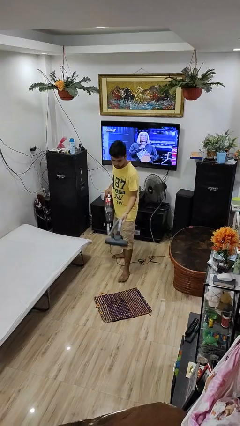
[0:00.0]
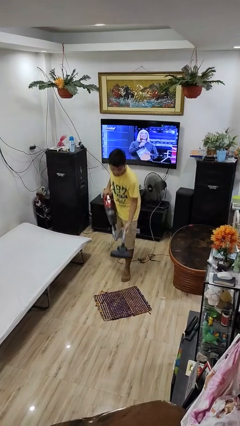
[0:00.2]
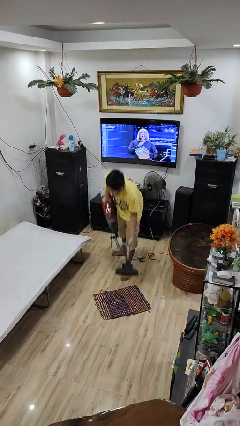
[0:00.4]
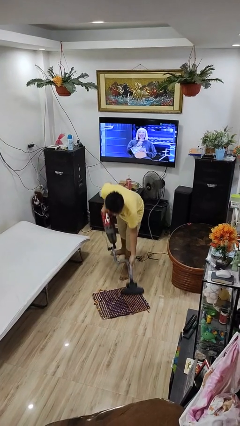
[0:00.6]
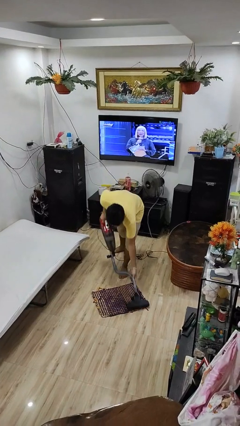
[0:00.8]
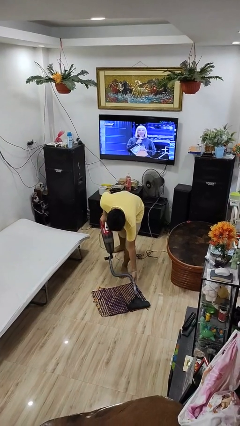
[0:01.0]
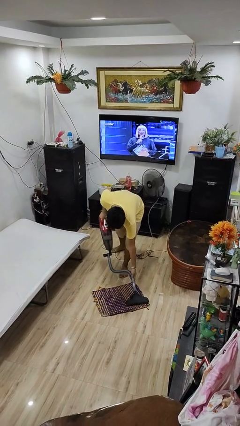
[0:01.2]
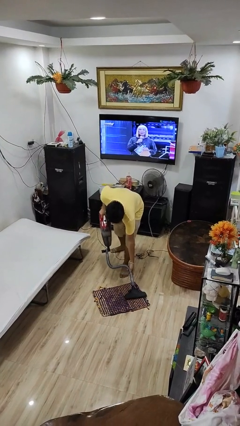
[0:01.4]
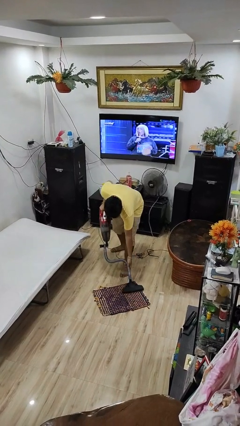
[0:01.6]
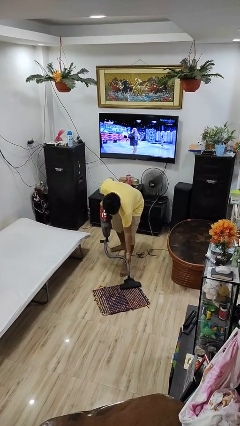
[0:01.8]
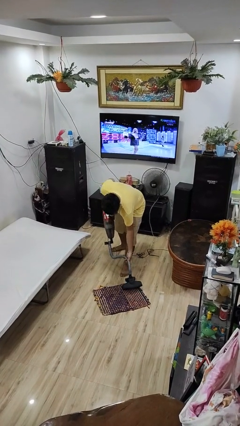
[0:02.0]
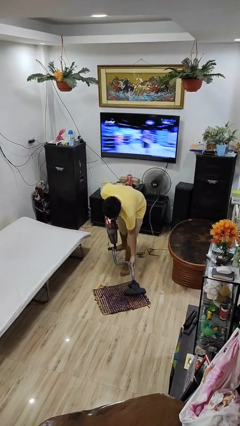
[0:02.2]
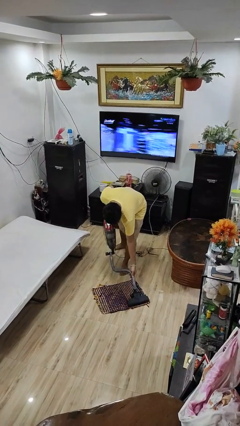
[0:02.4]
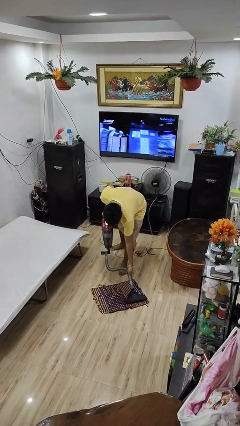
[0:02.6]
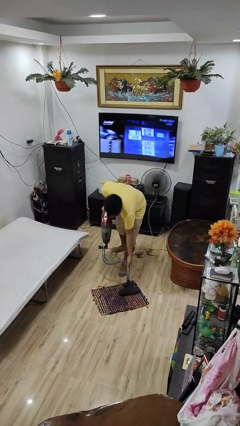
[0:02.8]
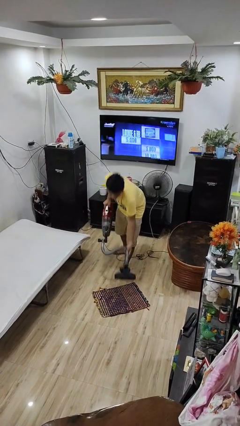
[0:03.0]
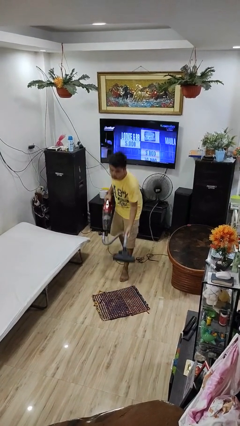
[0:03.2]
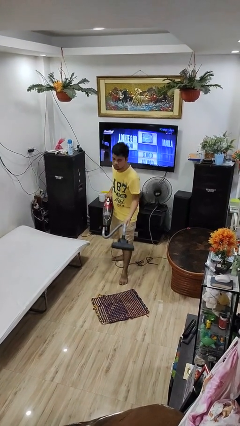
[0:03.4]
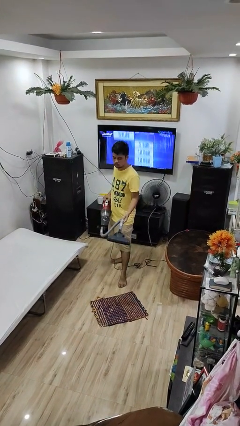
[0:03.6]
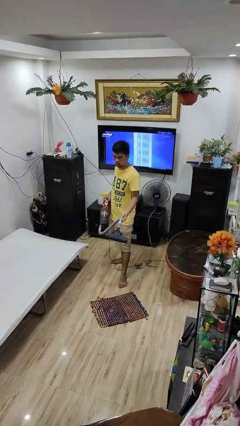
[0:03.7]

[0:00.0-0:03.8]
person vacuums carpet

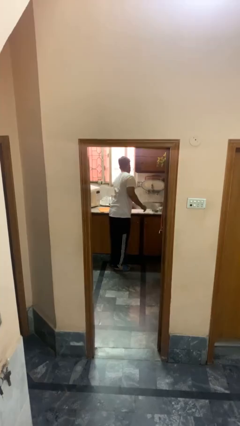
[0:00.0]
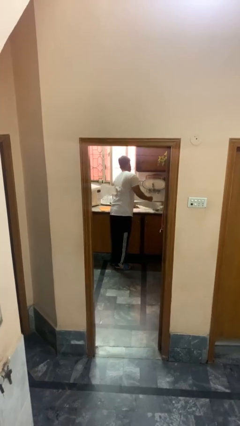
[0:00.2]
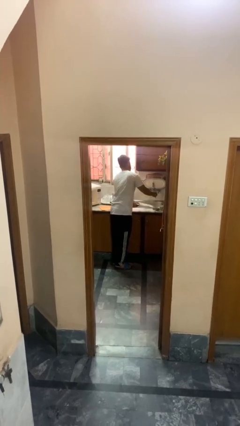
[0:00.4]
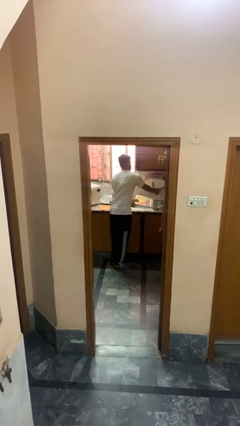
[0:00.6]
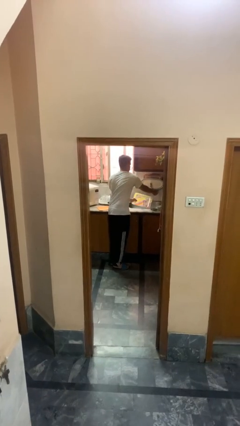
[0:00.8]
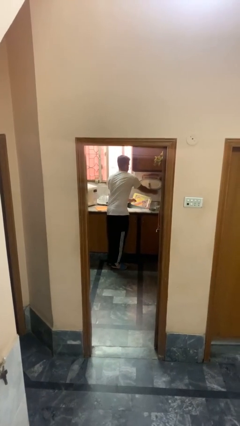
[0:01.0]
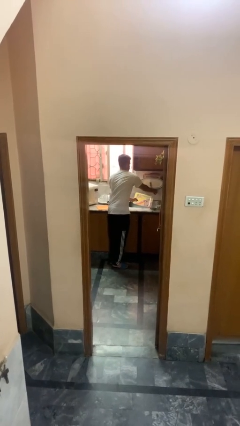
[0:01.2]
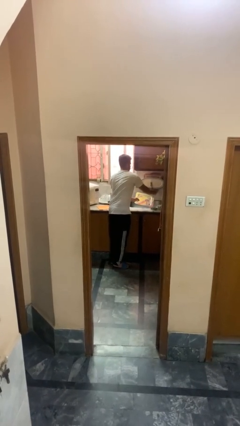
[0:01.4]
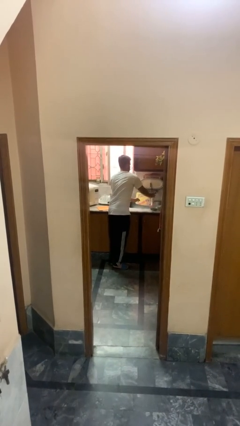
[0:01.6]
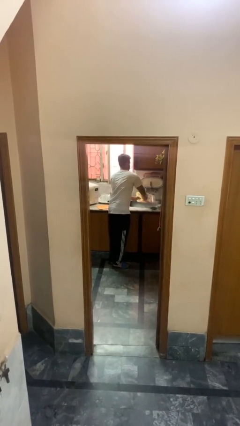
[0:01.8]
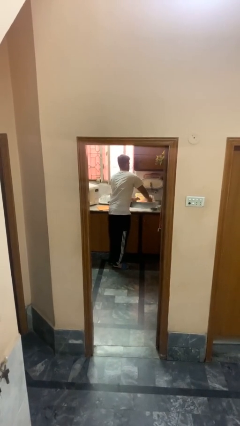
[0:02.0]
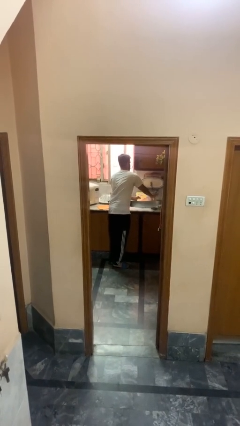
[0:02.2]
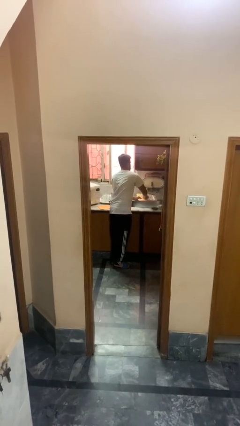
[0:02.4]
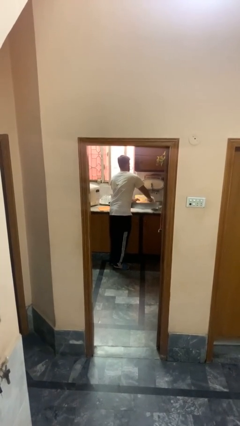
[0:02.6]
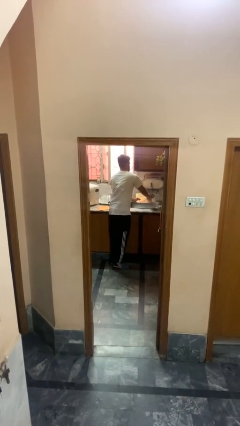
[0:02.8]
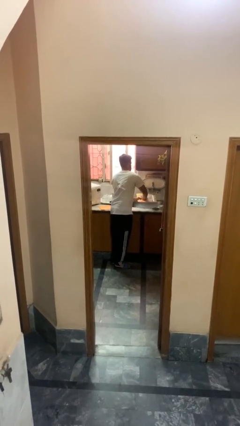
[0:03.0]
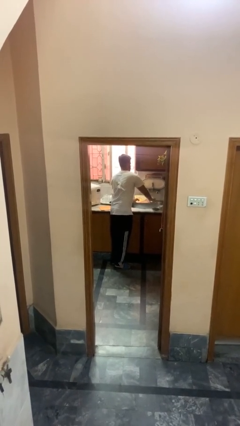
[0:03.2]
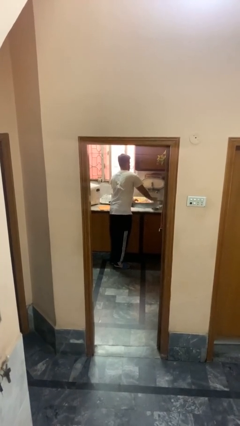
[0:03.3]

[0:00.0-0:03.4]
person washes dish

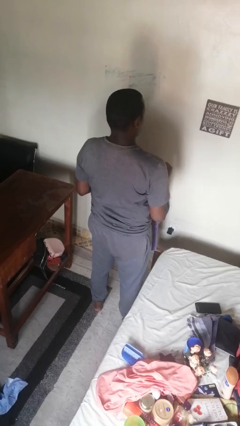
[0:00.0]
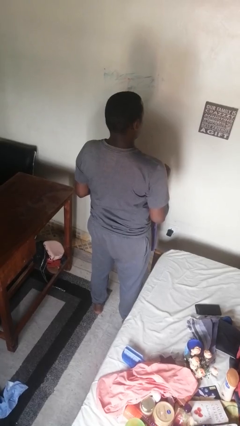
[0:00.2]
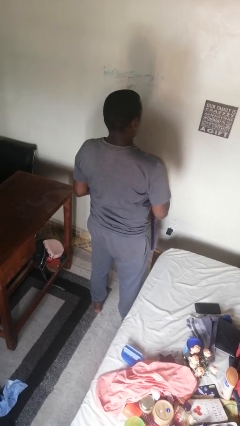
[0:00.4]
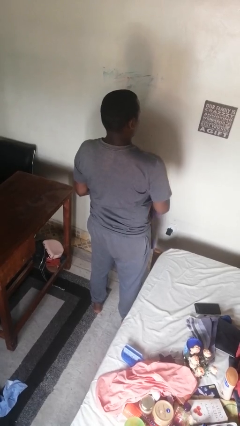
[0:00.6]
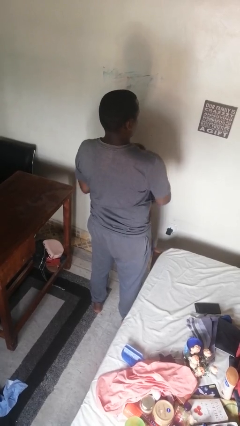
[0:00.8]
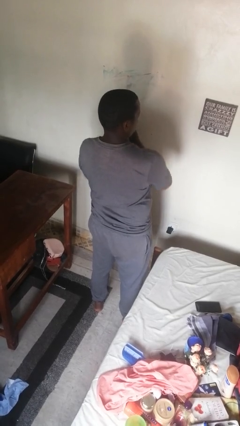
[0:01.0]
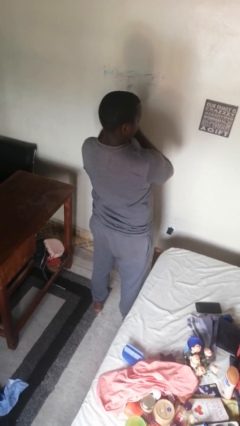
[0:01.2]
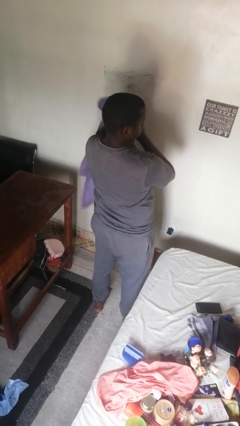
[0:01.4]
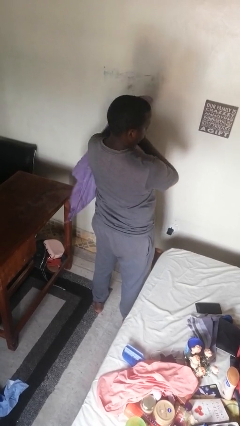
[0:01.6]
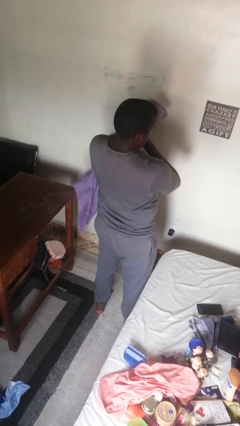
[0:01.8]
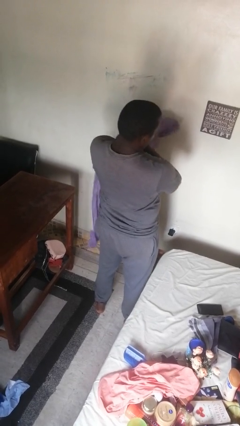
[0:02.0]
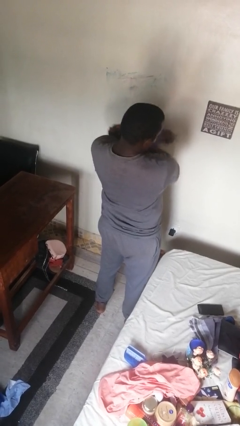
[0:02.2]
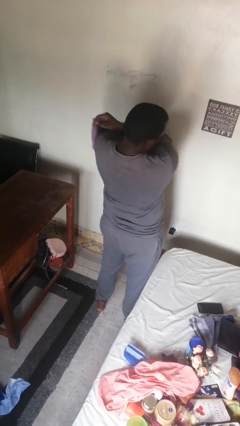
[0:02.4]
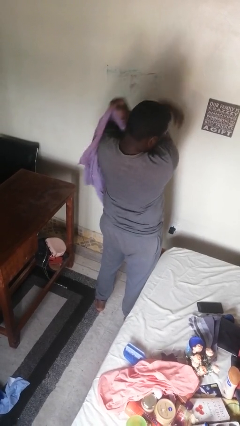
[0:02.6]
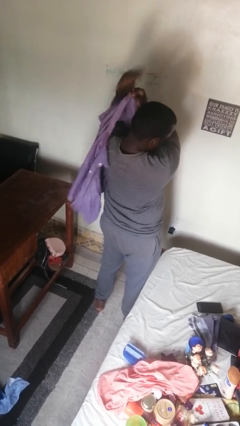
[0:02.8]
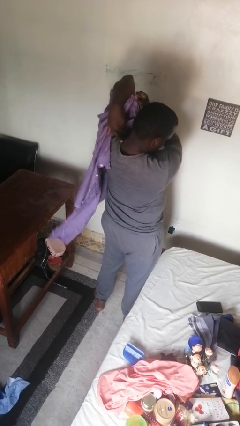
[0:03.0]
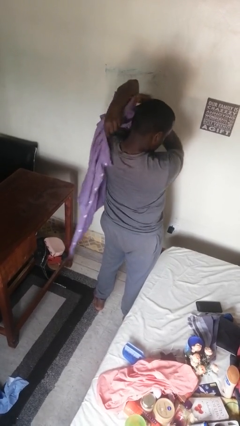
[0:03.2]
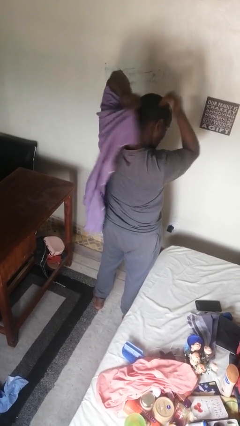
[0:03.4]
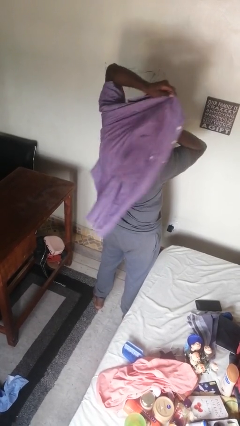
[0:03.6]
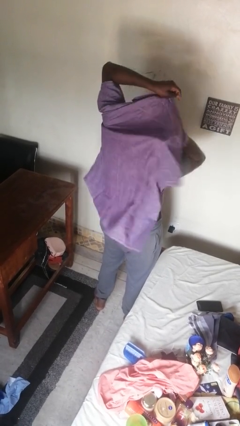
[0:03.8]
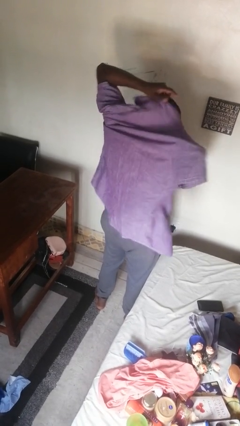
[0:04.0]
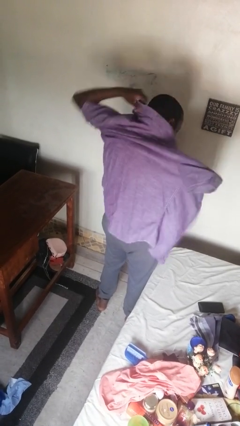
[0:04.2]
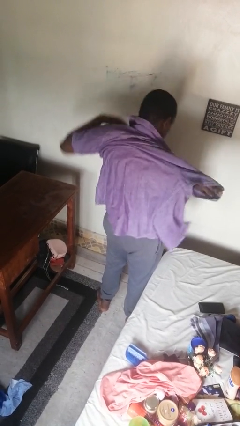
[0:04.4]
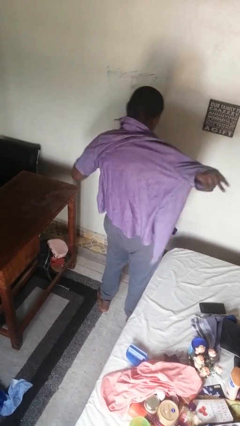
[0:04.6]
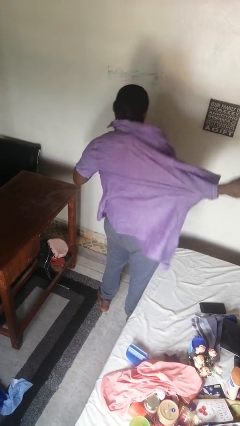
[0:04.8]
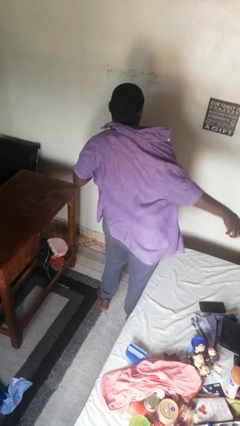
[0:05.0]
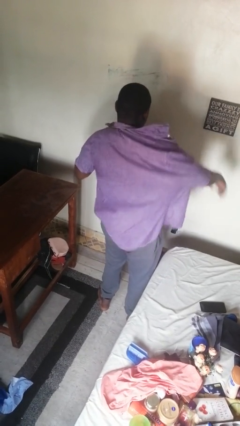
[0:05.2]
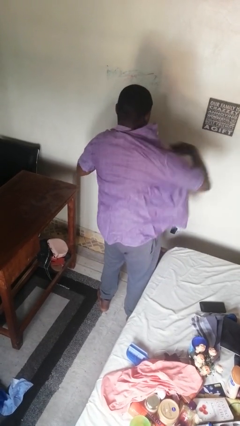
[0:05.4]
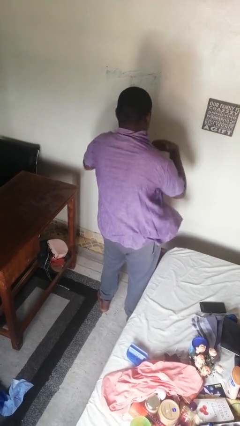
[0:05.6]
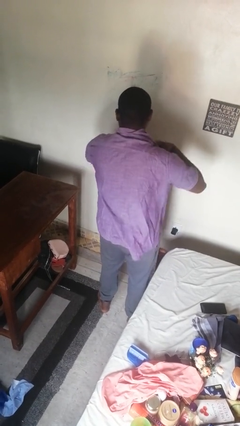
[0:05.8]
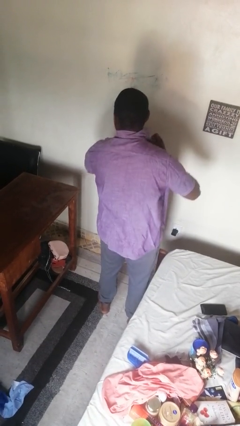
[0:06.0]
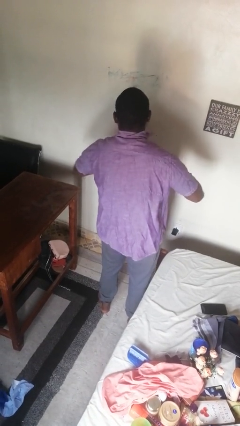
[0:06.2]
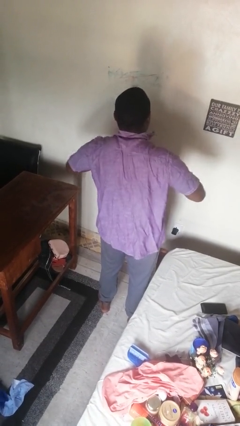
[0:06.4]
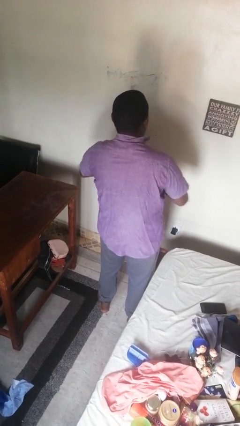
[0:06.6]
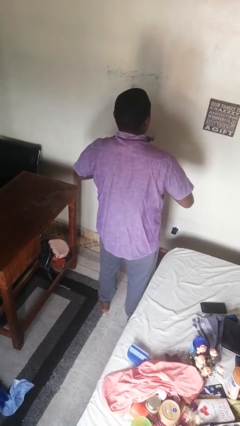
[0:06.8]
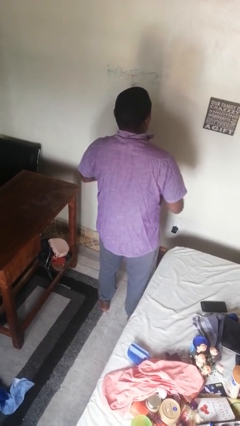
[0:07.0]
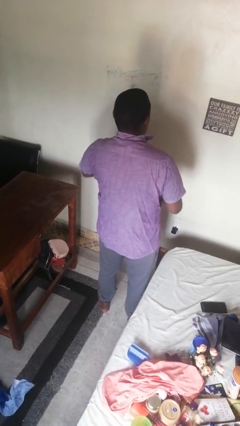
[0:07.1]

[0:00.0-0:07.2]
person puts on shirt

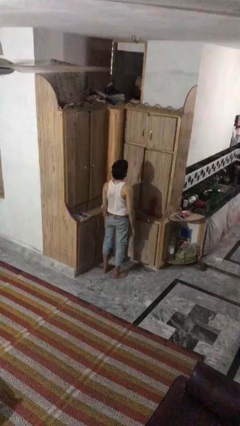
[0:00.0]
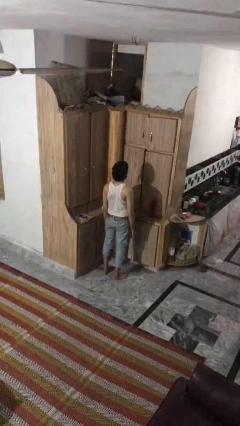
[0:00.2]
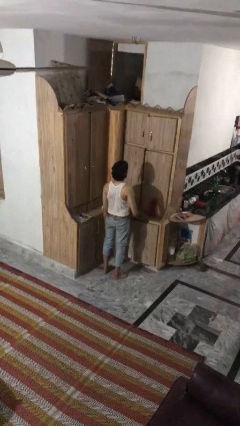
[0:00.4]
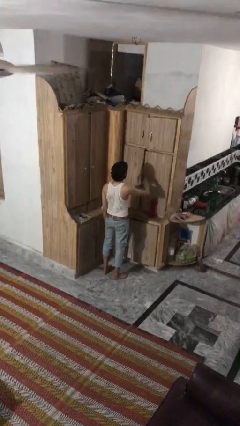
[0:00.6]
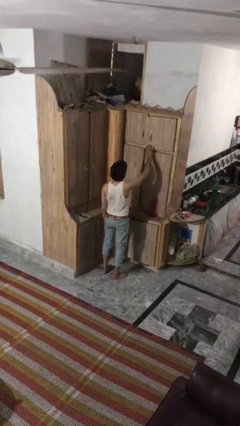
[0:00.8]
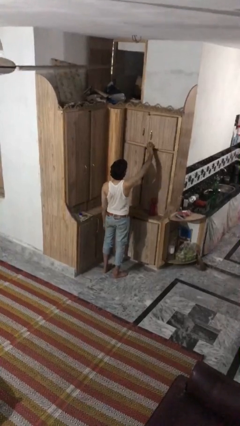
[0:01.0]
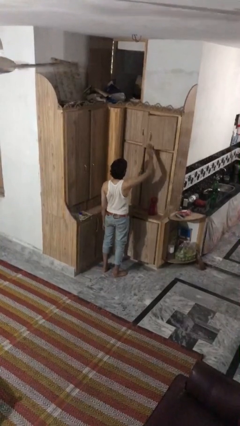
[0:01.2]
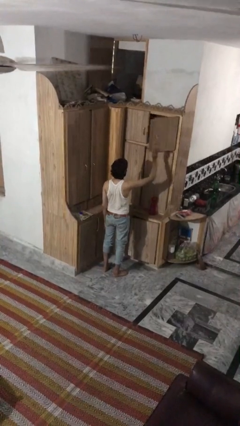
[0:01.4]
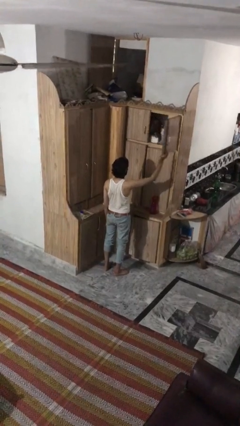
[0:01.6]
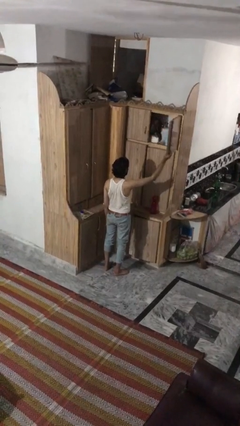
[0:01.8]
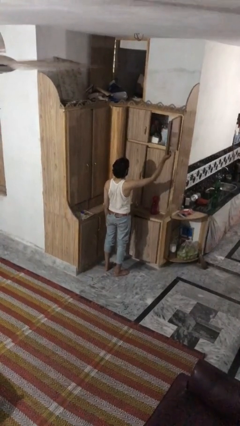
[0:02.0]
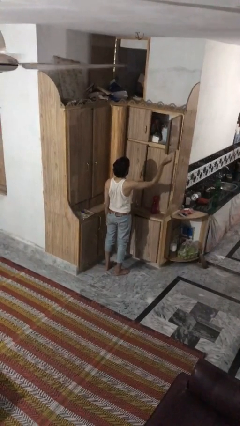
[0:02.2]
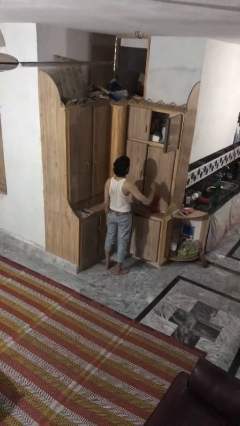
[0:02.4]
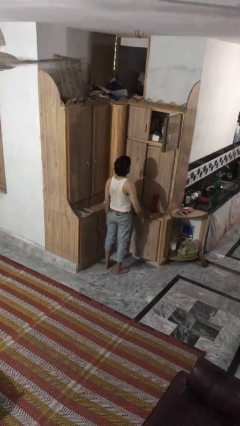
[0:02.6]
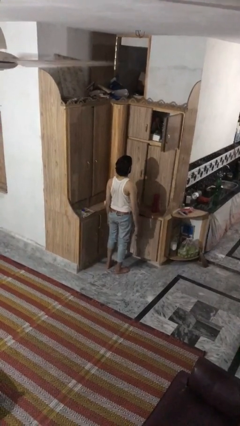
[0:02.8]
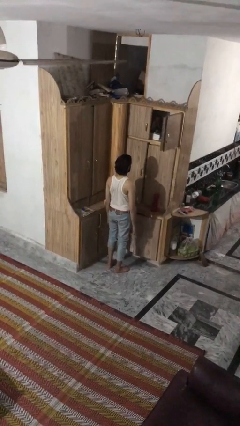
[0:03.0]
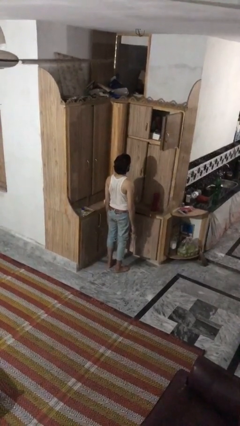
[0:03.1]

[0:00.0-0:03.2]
person opens cabinet
